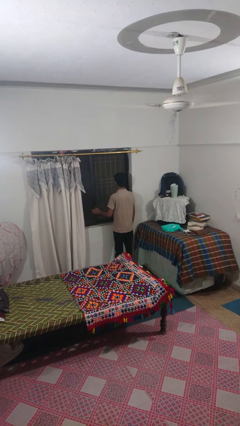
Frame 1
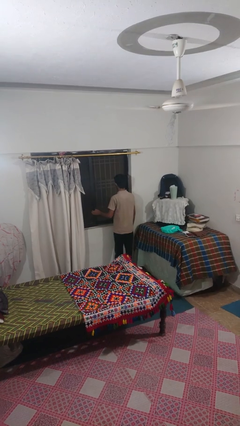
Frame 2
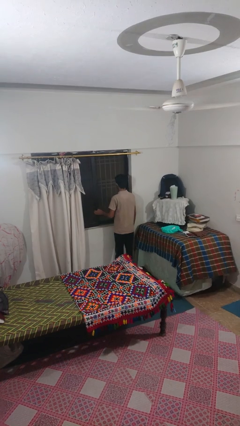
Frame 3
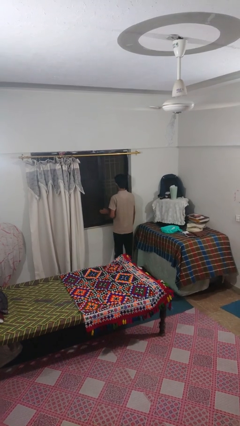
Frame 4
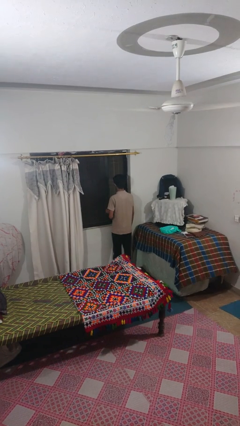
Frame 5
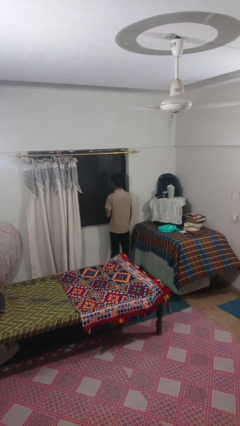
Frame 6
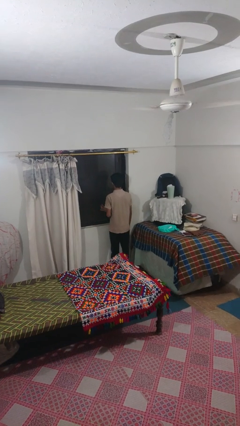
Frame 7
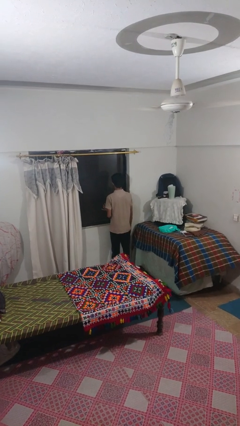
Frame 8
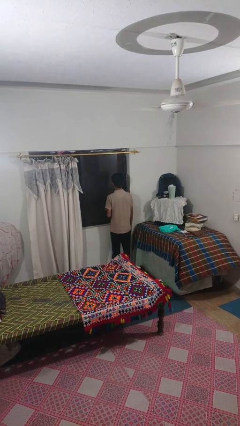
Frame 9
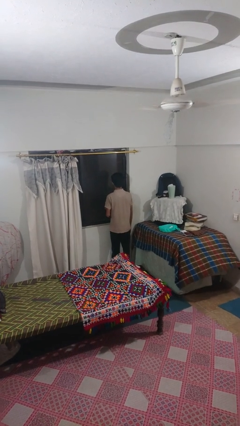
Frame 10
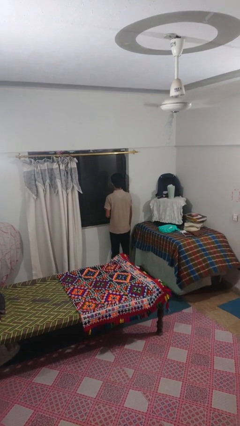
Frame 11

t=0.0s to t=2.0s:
person closes sliding door

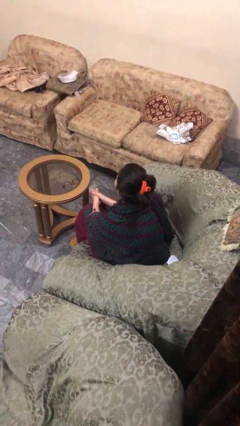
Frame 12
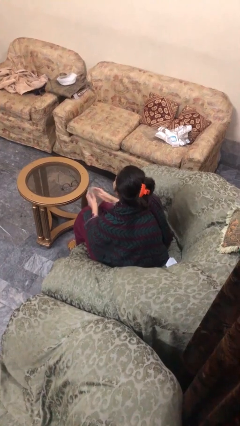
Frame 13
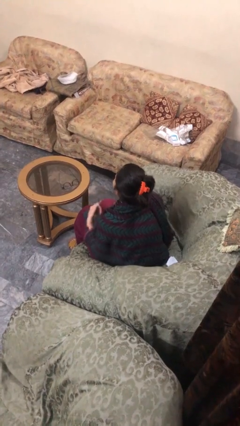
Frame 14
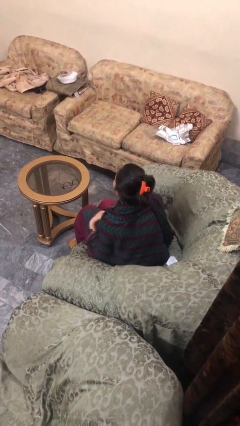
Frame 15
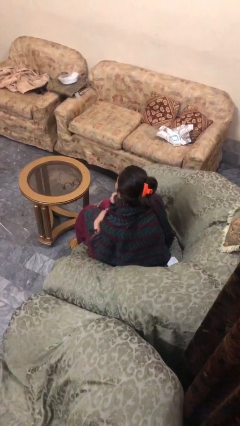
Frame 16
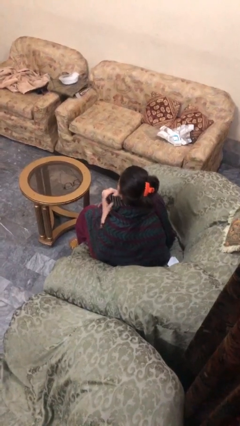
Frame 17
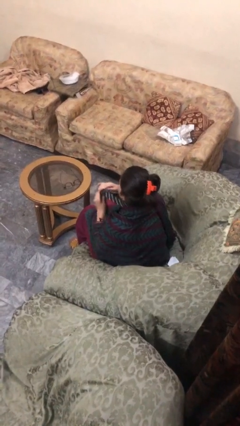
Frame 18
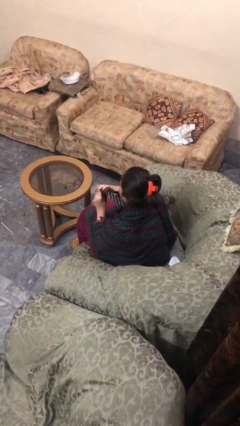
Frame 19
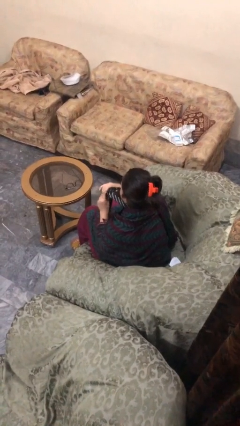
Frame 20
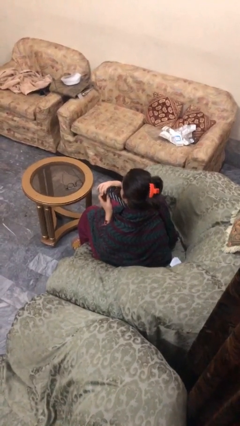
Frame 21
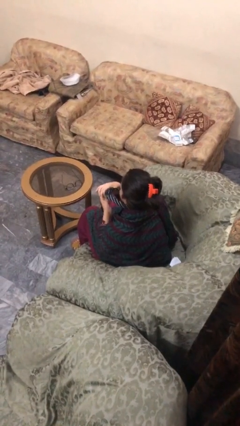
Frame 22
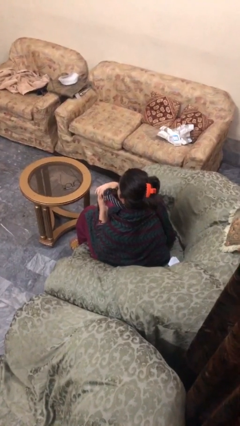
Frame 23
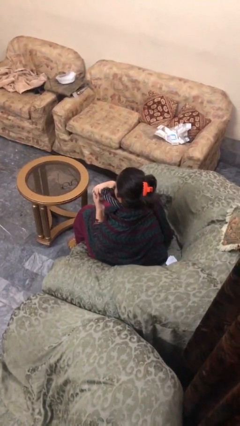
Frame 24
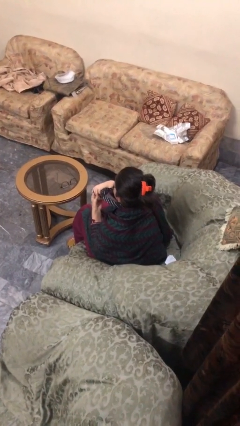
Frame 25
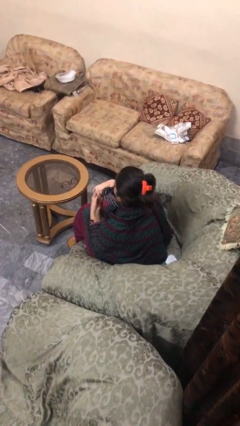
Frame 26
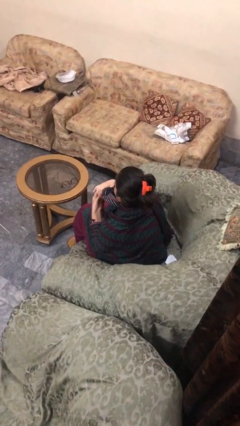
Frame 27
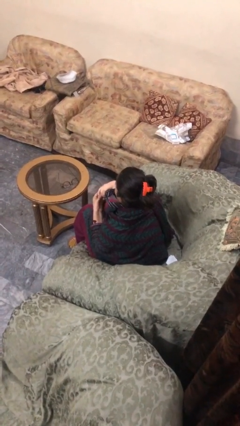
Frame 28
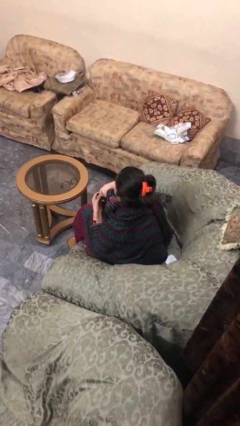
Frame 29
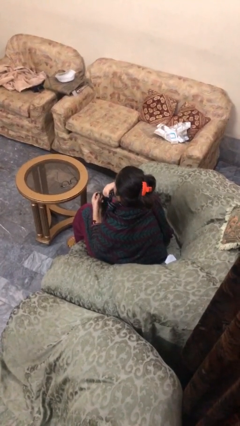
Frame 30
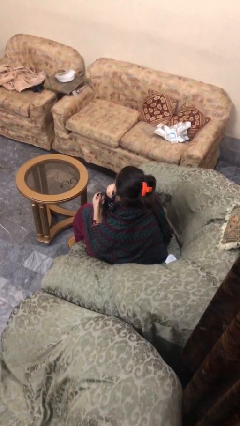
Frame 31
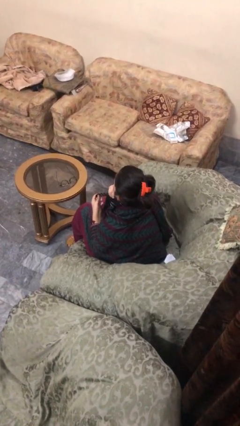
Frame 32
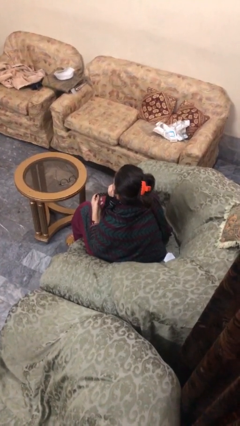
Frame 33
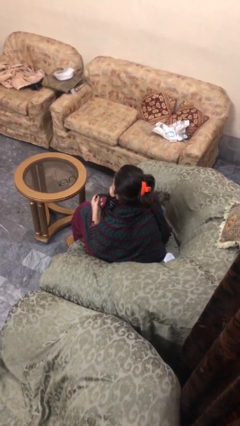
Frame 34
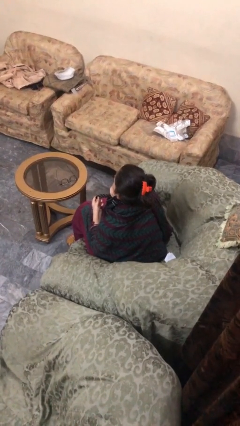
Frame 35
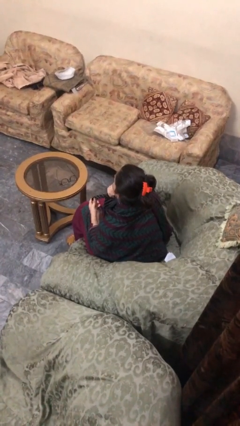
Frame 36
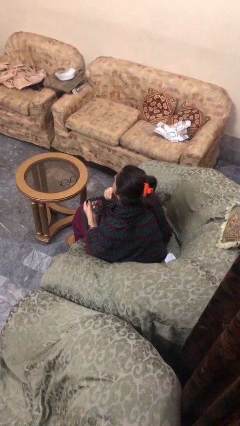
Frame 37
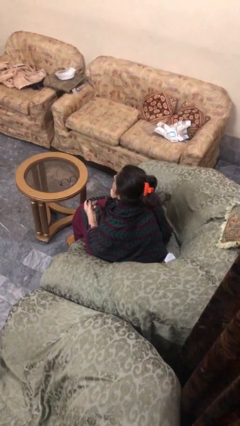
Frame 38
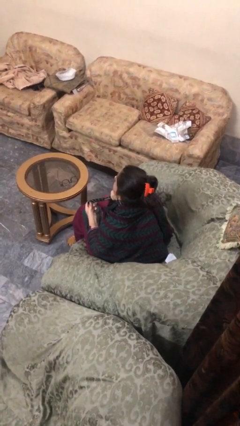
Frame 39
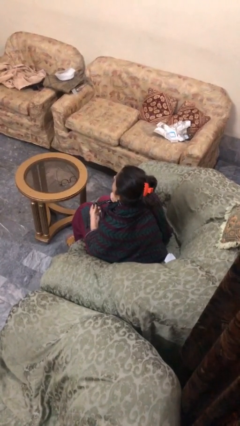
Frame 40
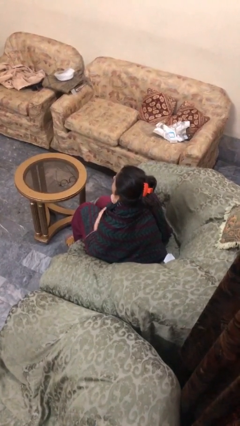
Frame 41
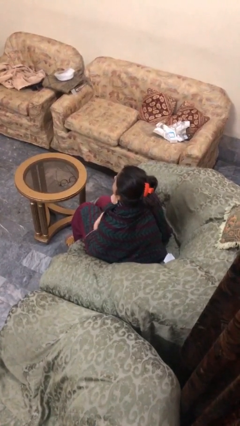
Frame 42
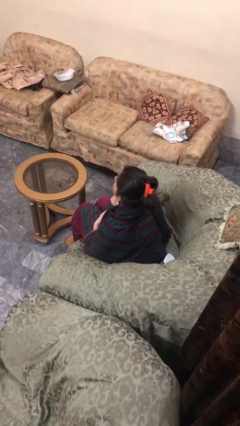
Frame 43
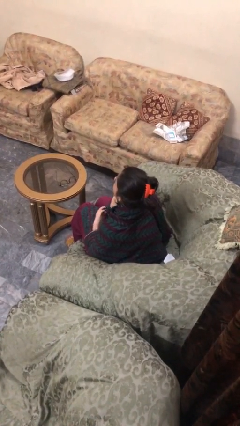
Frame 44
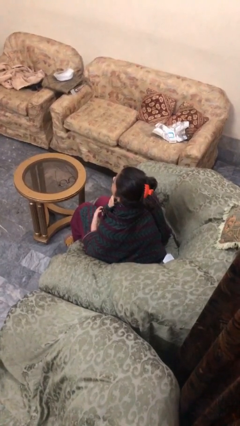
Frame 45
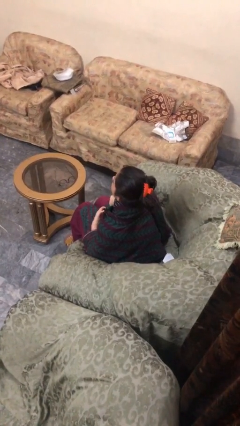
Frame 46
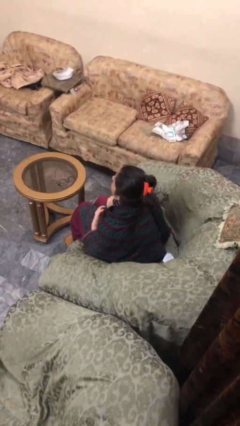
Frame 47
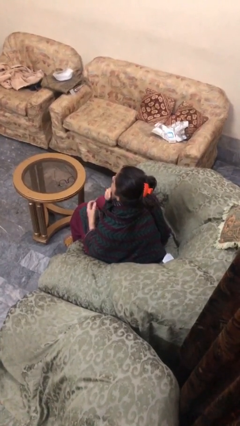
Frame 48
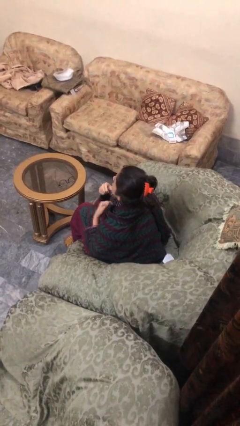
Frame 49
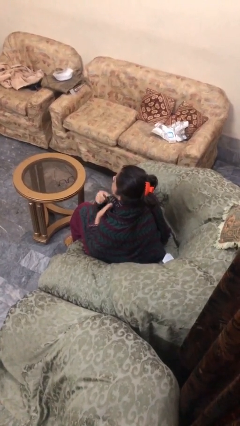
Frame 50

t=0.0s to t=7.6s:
person puts on necktie

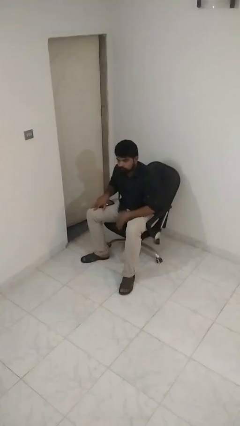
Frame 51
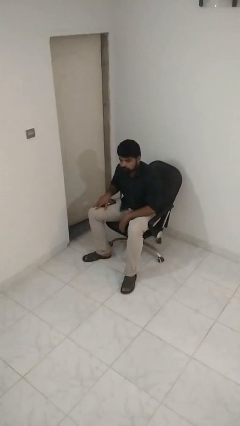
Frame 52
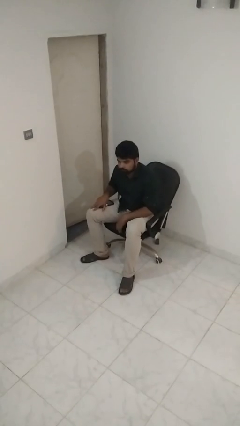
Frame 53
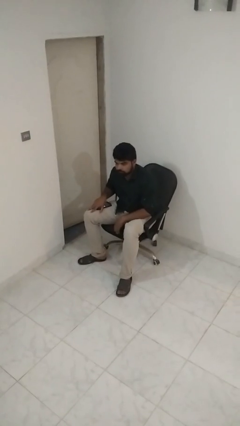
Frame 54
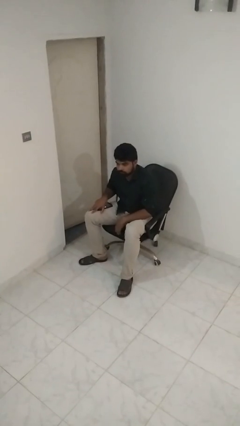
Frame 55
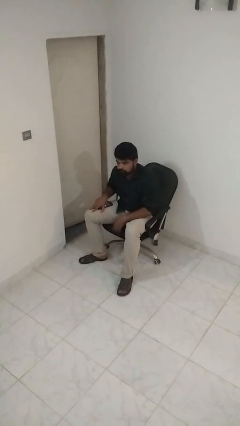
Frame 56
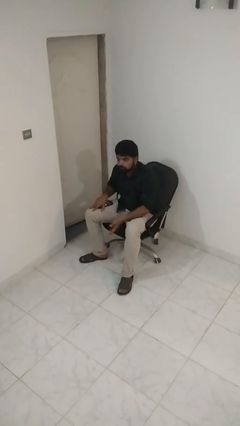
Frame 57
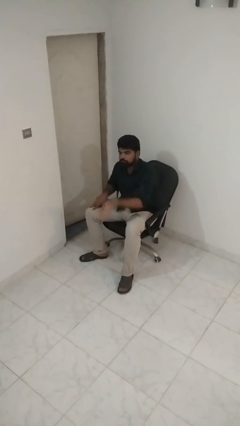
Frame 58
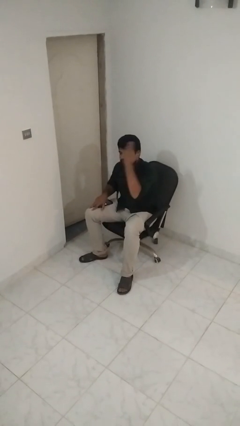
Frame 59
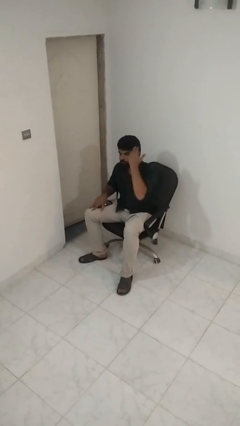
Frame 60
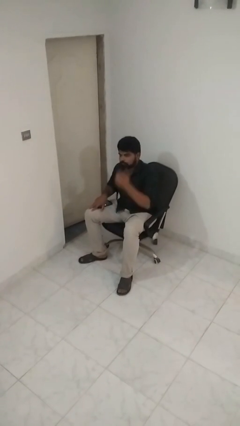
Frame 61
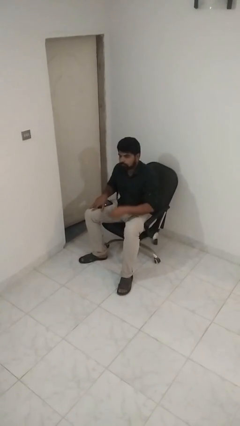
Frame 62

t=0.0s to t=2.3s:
person gestures swipe up

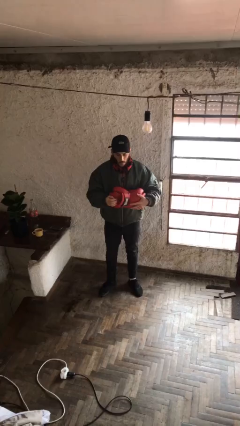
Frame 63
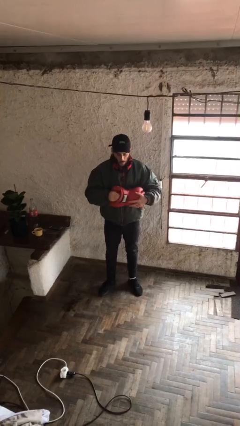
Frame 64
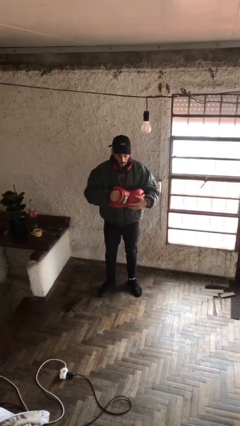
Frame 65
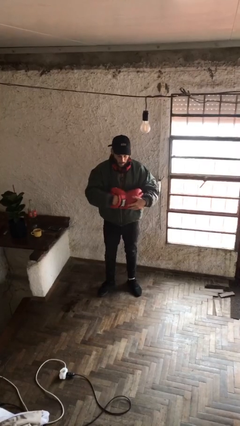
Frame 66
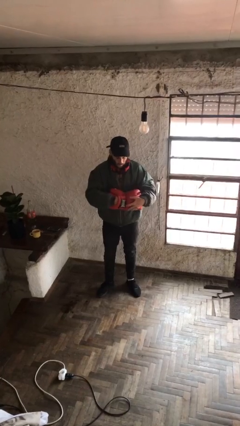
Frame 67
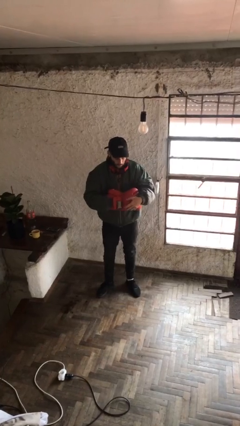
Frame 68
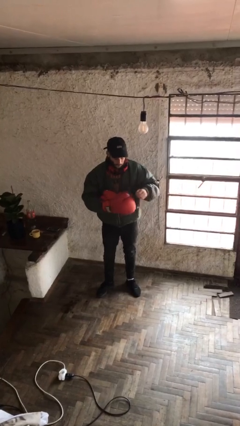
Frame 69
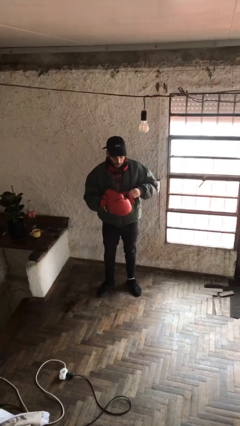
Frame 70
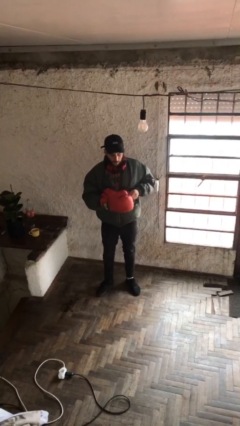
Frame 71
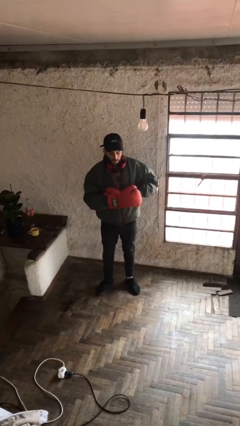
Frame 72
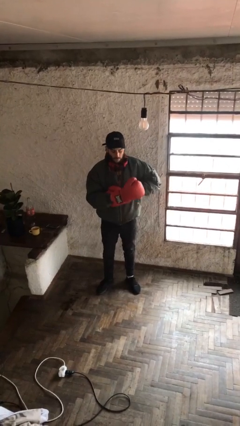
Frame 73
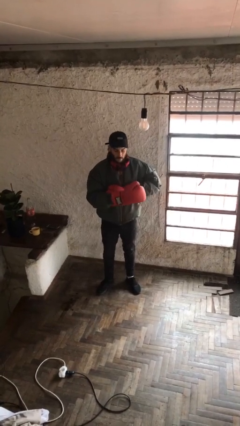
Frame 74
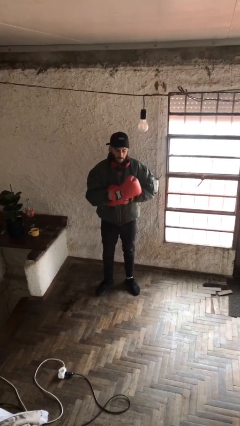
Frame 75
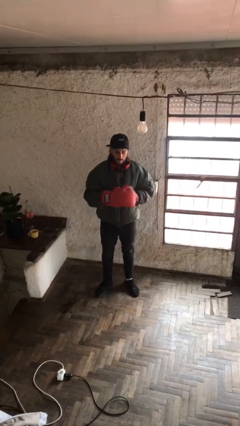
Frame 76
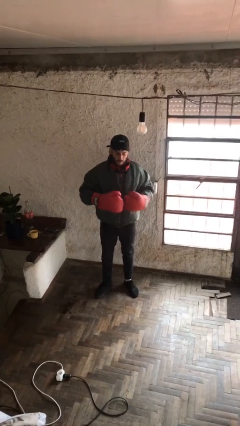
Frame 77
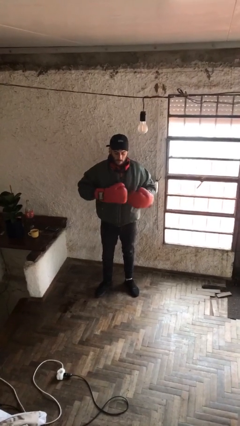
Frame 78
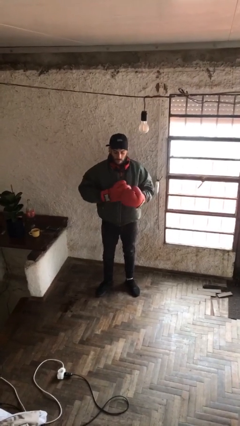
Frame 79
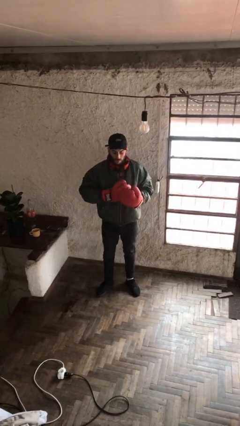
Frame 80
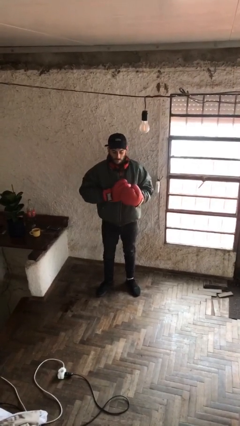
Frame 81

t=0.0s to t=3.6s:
person puts on gloves

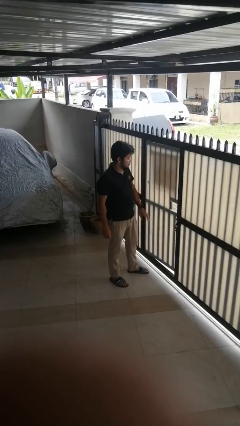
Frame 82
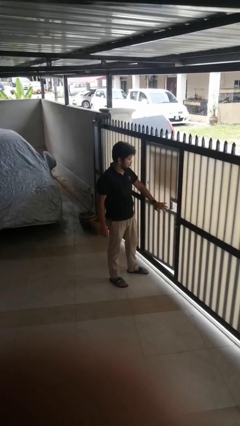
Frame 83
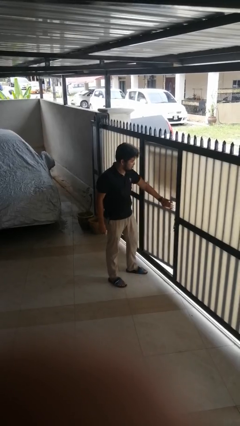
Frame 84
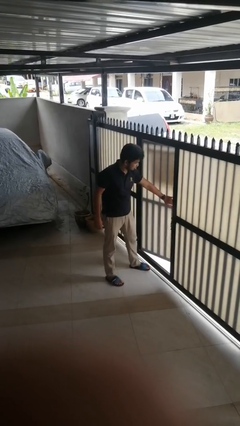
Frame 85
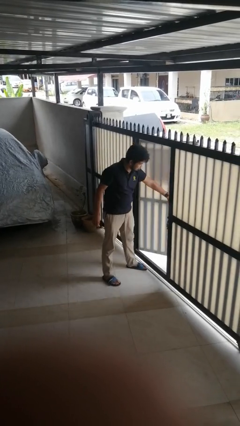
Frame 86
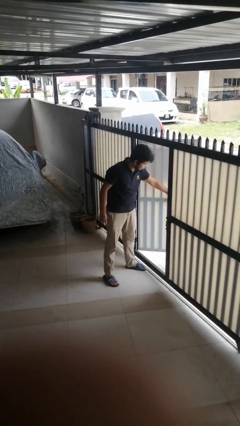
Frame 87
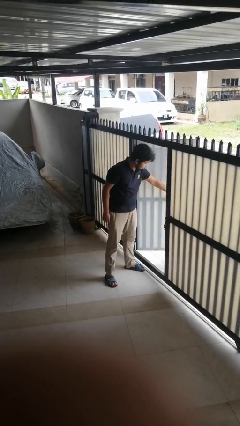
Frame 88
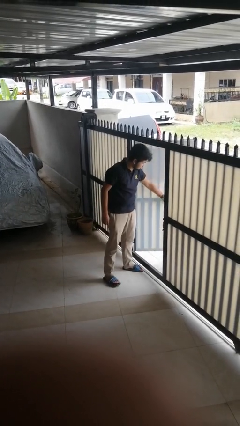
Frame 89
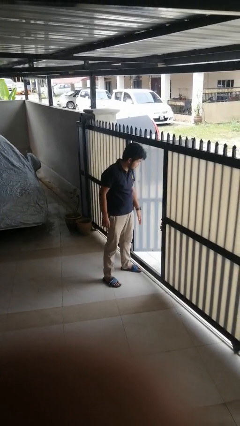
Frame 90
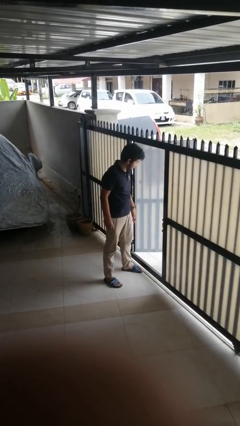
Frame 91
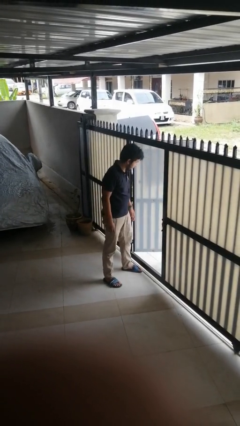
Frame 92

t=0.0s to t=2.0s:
person opens gate

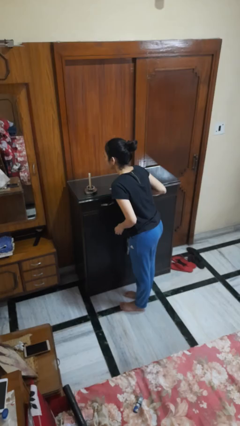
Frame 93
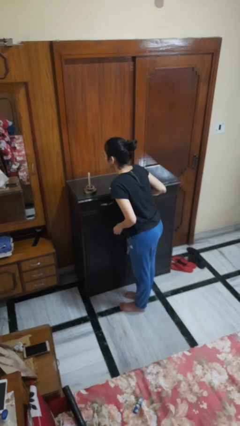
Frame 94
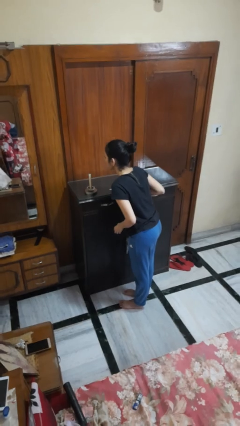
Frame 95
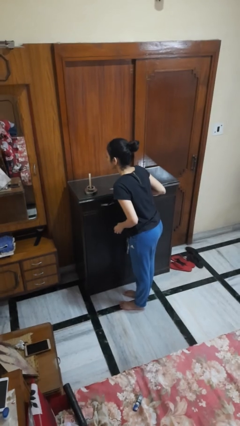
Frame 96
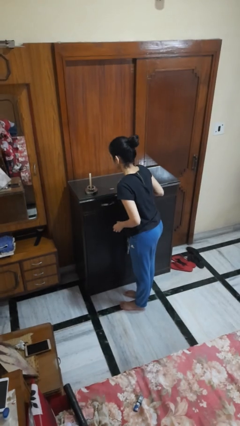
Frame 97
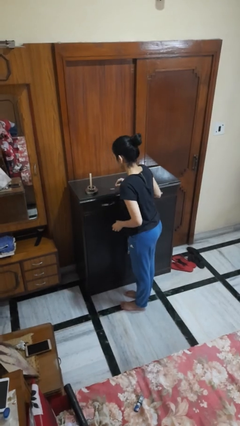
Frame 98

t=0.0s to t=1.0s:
person extinguishes candle
